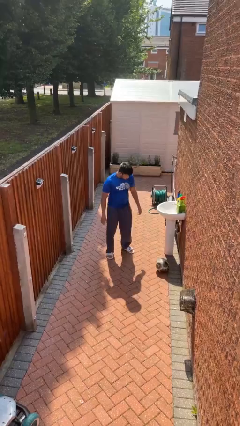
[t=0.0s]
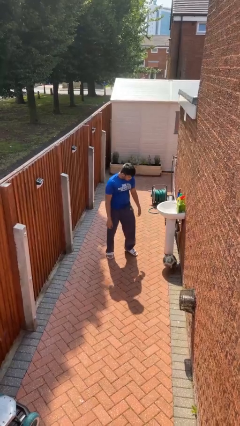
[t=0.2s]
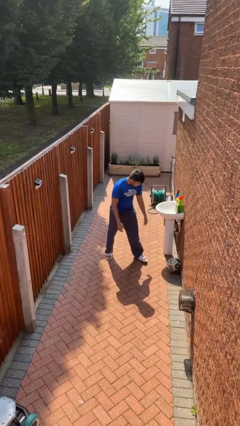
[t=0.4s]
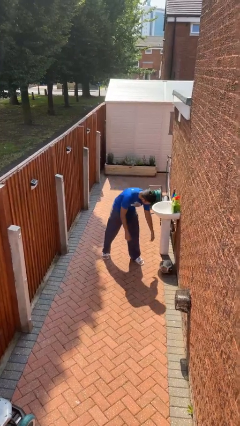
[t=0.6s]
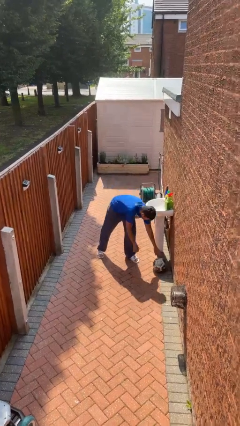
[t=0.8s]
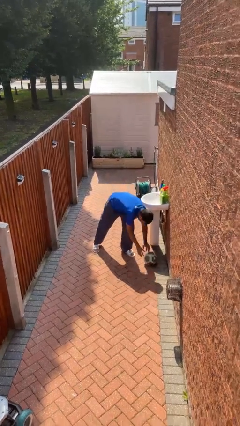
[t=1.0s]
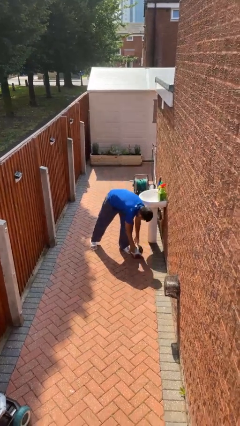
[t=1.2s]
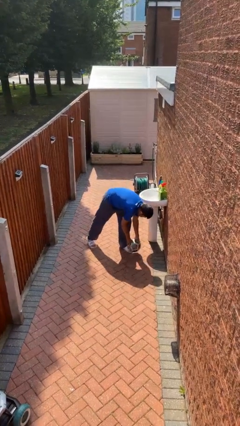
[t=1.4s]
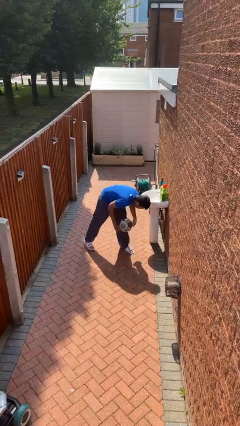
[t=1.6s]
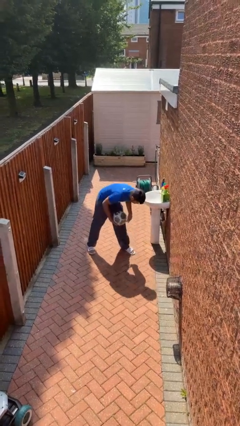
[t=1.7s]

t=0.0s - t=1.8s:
person picks up object from floor

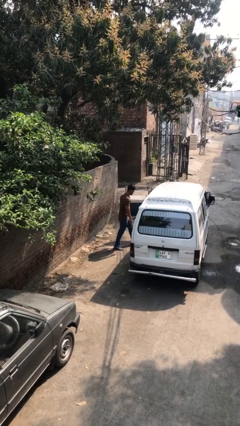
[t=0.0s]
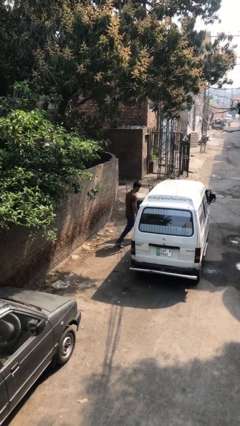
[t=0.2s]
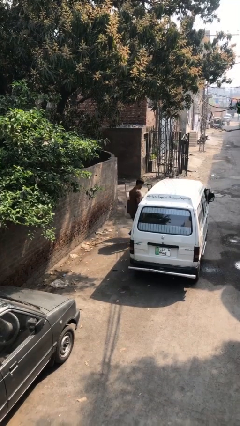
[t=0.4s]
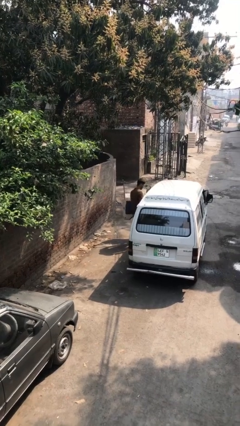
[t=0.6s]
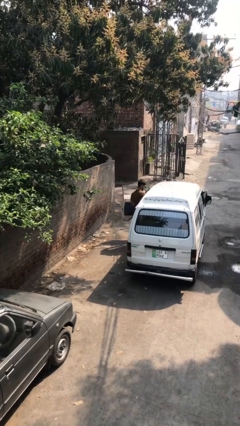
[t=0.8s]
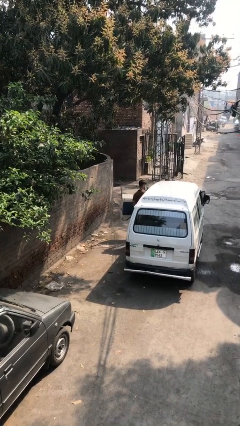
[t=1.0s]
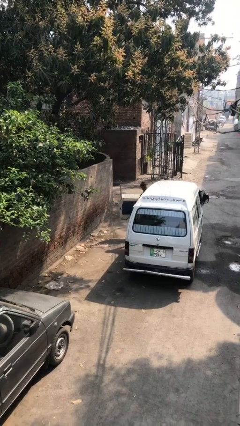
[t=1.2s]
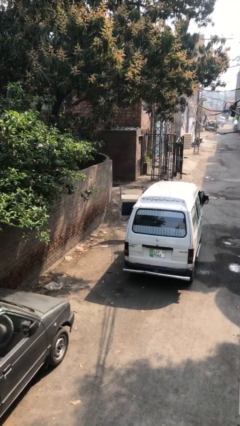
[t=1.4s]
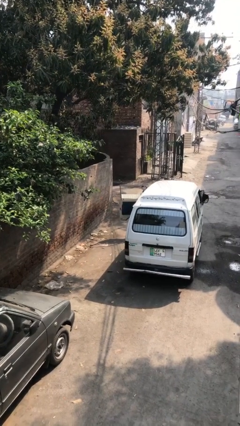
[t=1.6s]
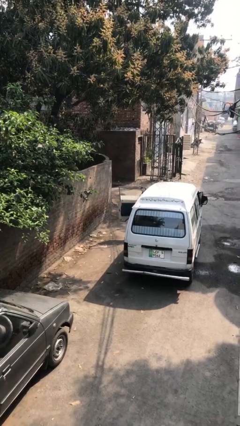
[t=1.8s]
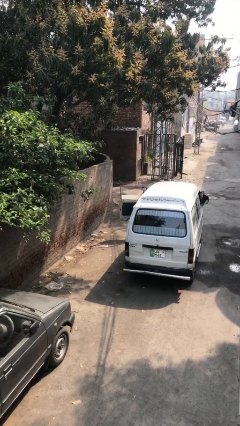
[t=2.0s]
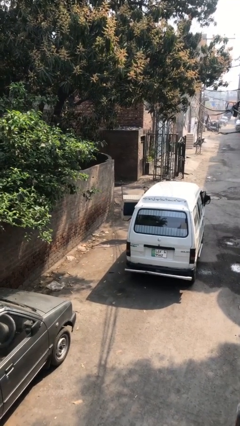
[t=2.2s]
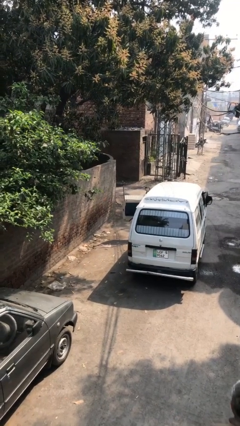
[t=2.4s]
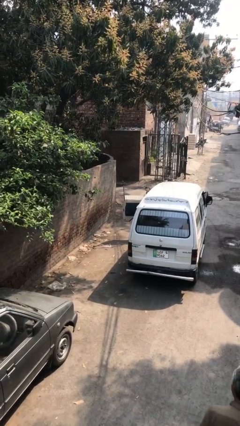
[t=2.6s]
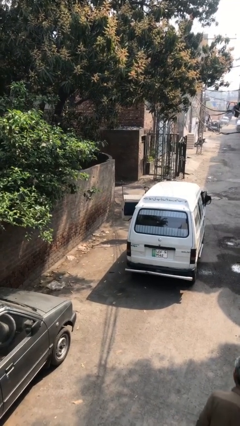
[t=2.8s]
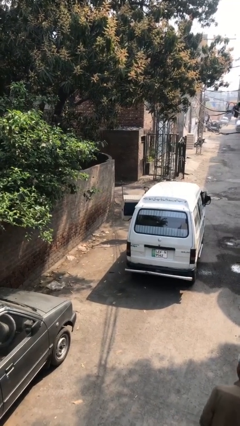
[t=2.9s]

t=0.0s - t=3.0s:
person enters car

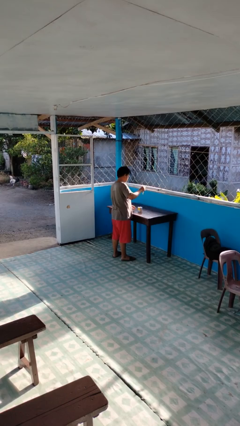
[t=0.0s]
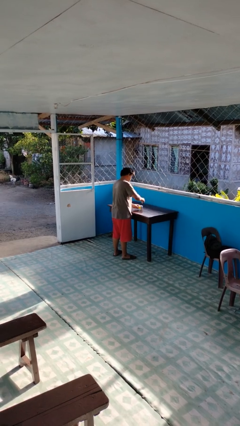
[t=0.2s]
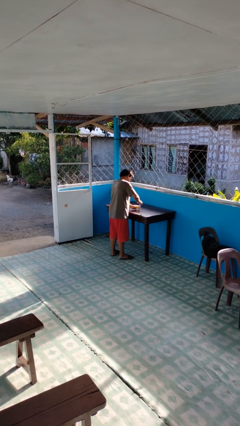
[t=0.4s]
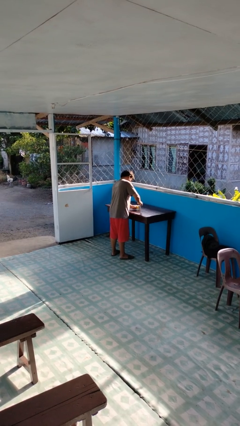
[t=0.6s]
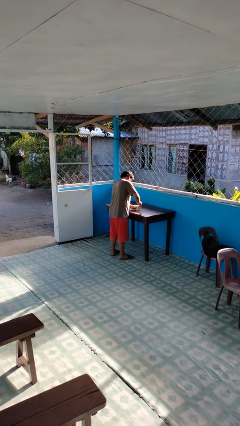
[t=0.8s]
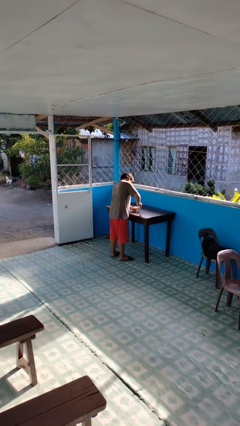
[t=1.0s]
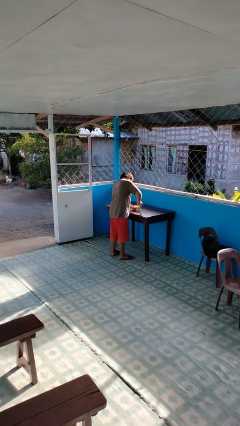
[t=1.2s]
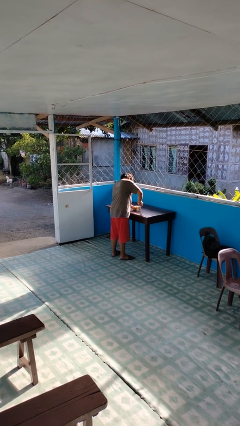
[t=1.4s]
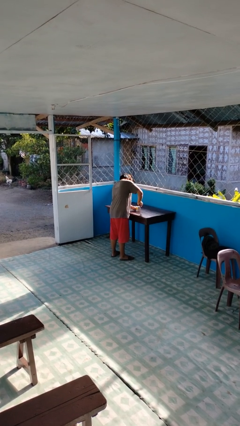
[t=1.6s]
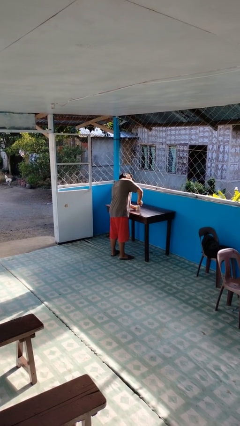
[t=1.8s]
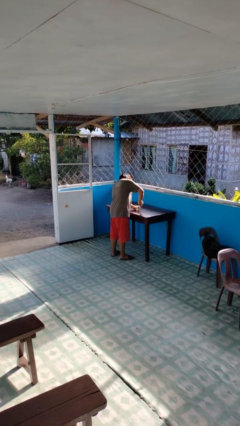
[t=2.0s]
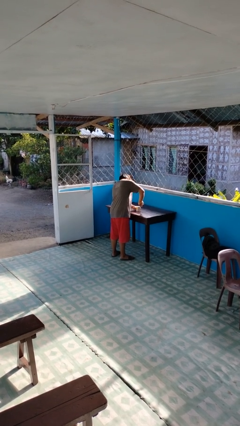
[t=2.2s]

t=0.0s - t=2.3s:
person opens can with can opener

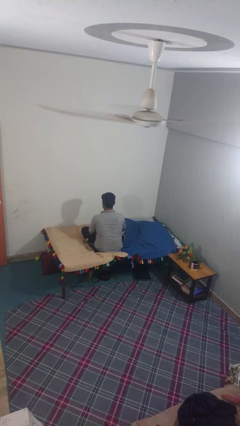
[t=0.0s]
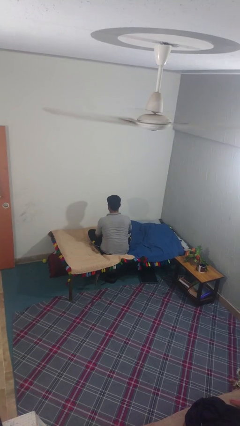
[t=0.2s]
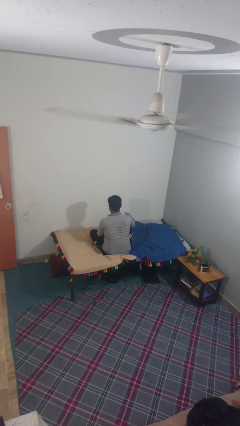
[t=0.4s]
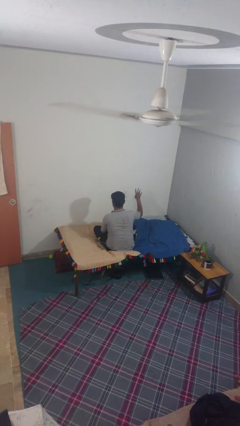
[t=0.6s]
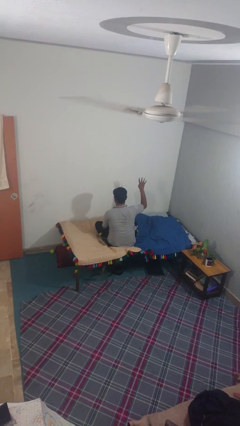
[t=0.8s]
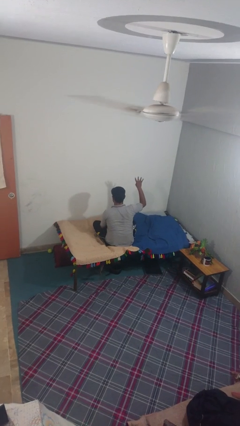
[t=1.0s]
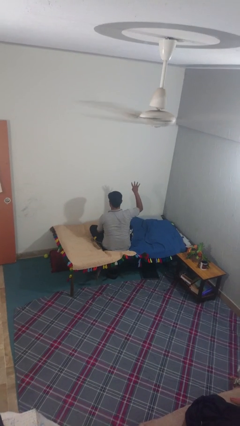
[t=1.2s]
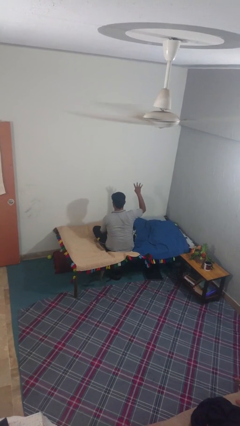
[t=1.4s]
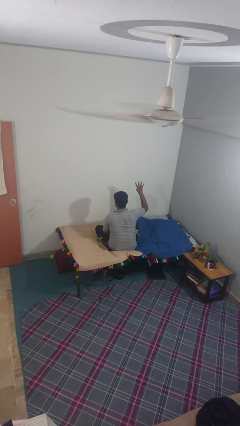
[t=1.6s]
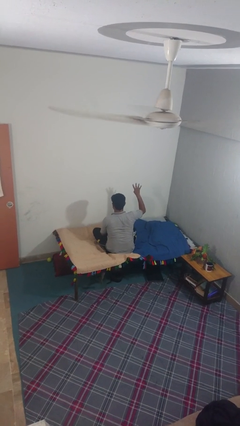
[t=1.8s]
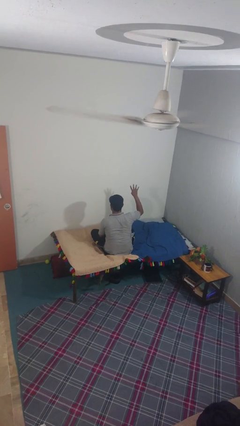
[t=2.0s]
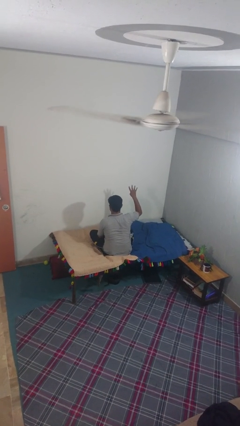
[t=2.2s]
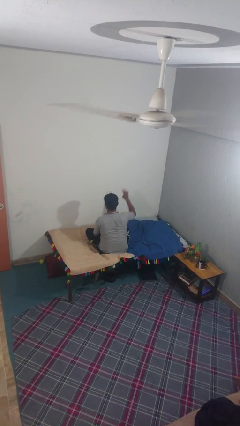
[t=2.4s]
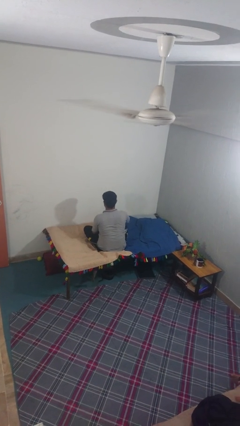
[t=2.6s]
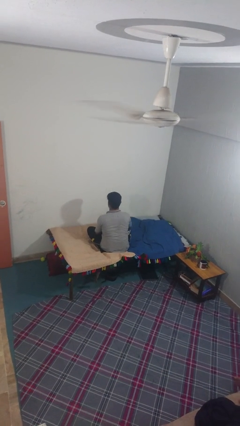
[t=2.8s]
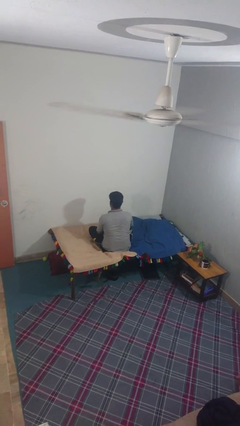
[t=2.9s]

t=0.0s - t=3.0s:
person gestures number four

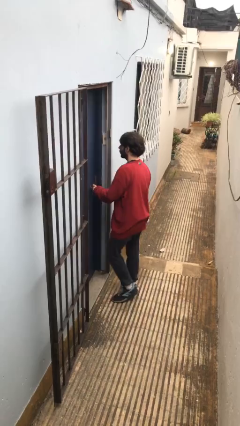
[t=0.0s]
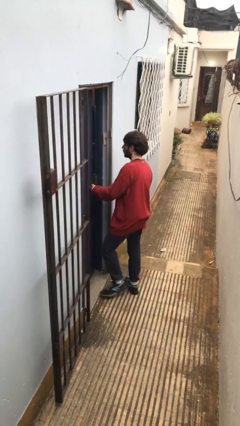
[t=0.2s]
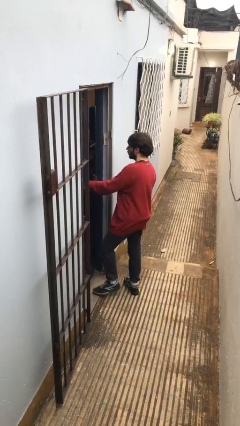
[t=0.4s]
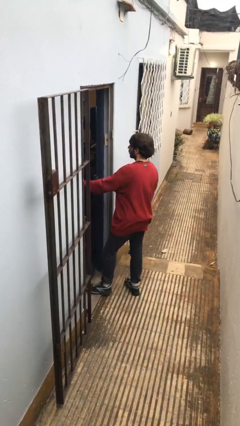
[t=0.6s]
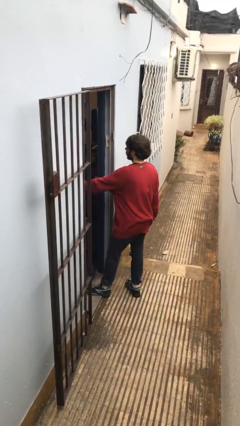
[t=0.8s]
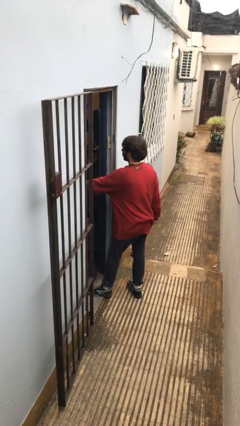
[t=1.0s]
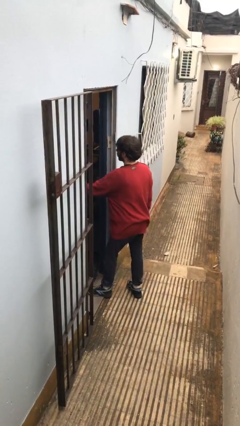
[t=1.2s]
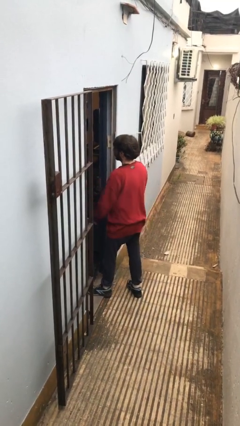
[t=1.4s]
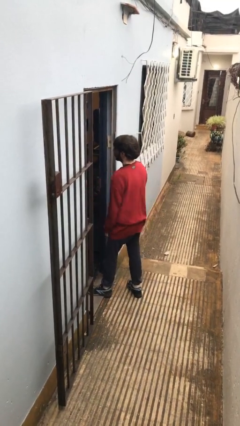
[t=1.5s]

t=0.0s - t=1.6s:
person opens facility door

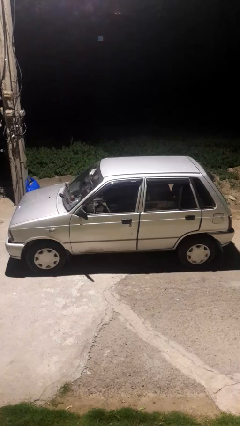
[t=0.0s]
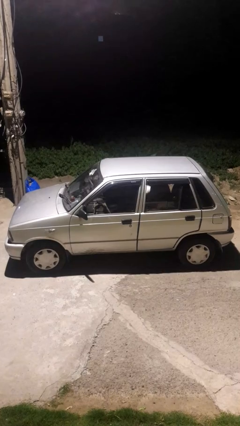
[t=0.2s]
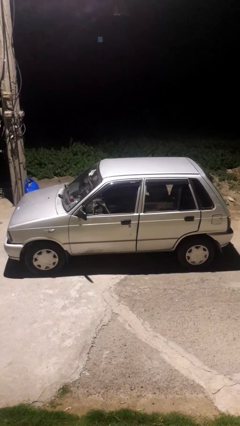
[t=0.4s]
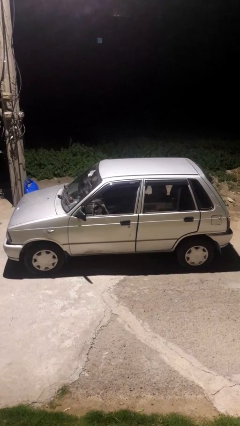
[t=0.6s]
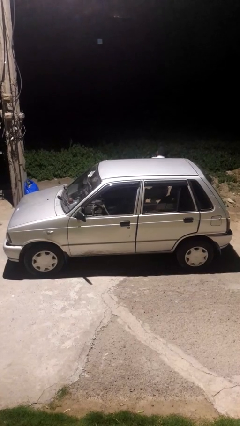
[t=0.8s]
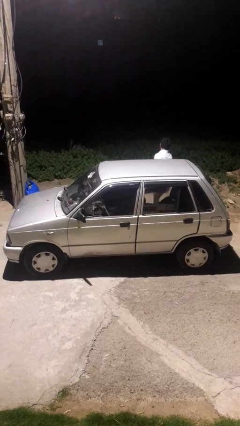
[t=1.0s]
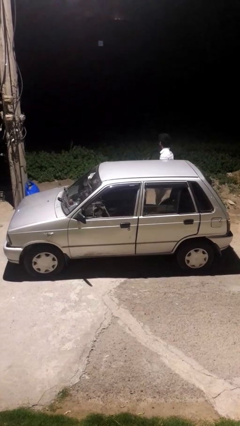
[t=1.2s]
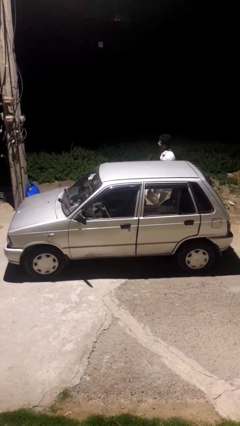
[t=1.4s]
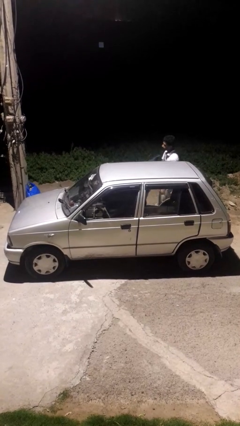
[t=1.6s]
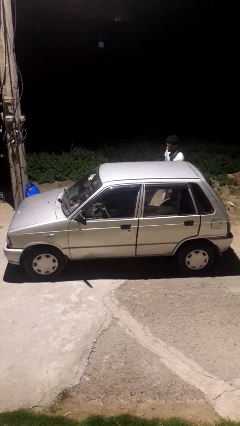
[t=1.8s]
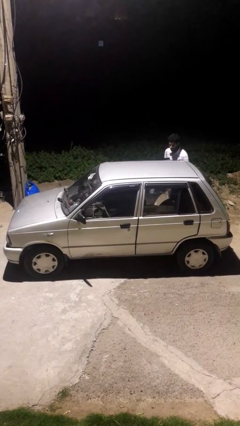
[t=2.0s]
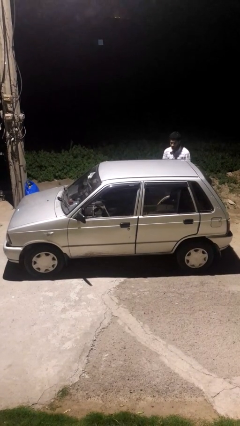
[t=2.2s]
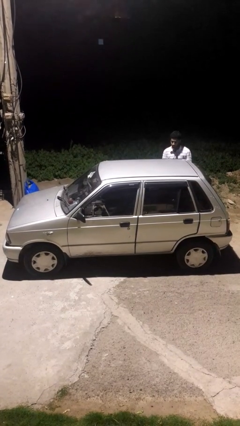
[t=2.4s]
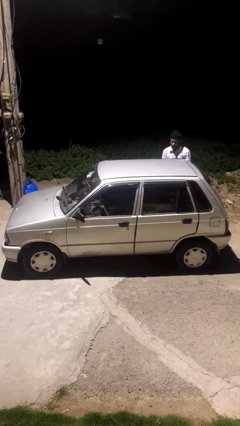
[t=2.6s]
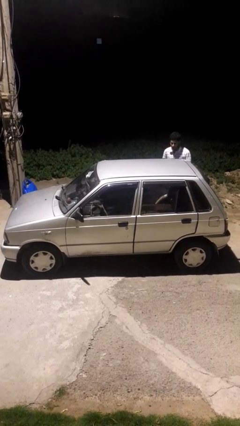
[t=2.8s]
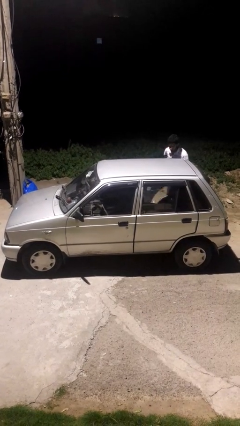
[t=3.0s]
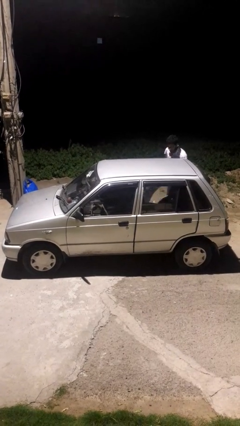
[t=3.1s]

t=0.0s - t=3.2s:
car drops off person

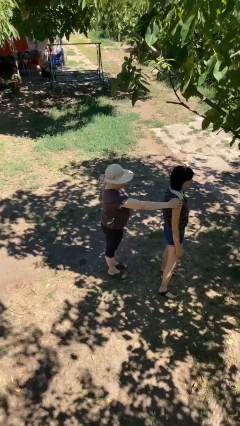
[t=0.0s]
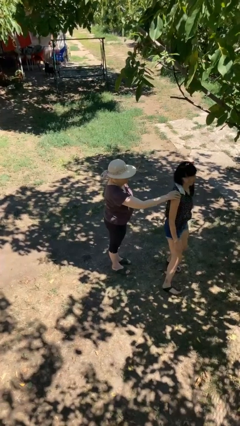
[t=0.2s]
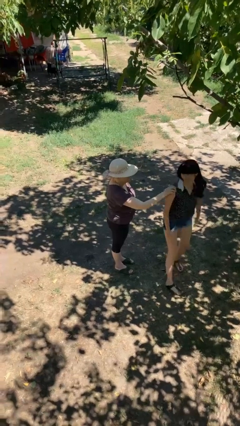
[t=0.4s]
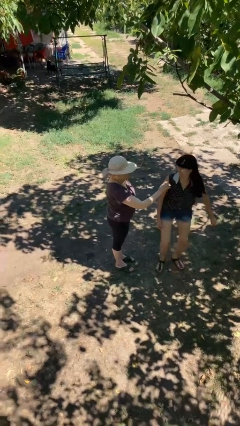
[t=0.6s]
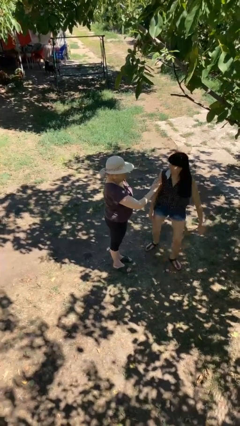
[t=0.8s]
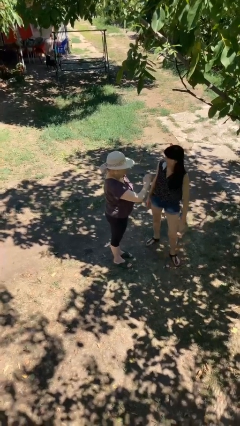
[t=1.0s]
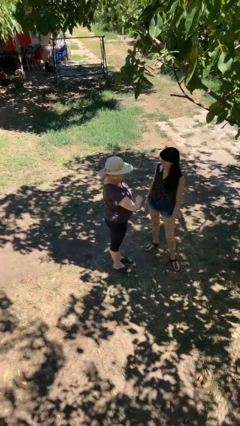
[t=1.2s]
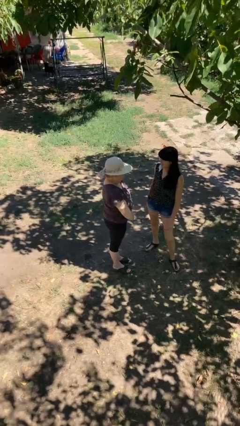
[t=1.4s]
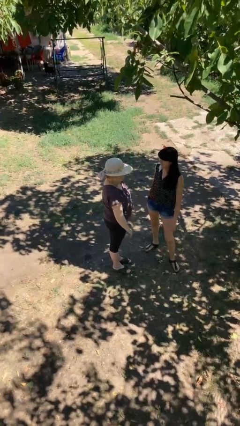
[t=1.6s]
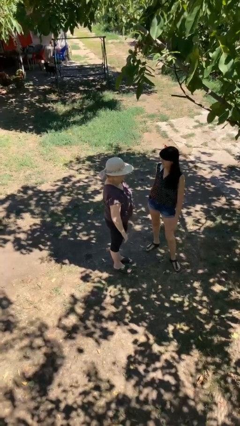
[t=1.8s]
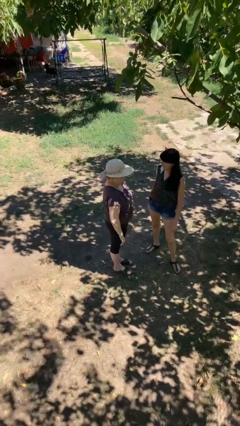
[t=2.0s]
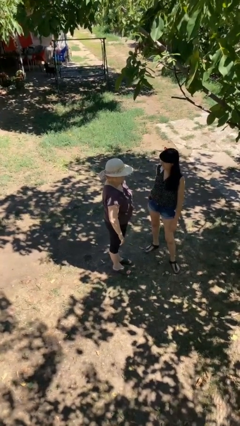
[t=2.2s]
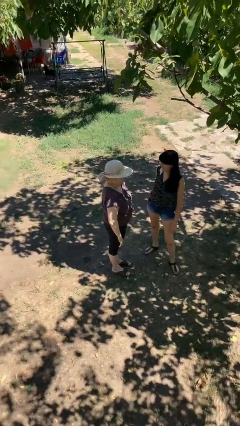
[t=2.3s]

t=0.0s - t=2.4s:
person spins person around
